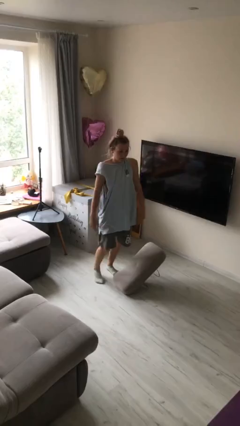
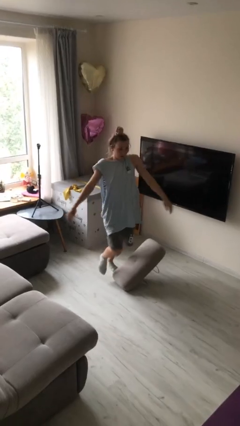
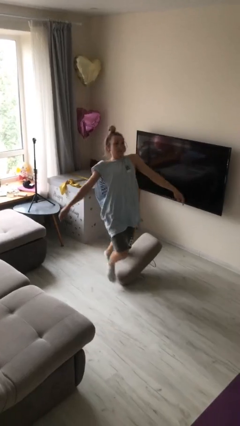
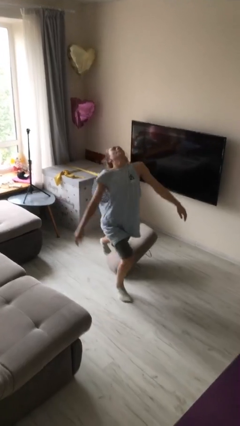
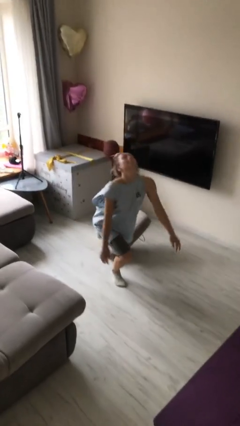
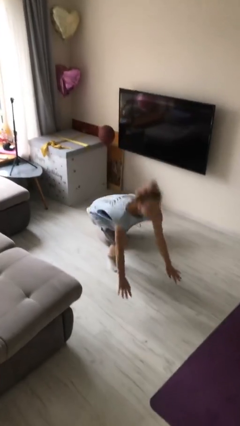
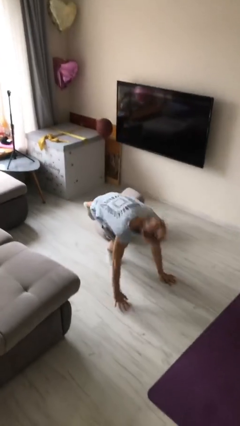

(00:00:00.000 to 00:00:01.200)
person trips on object on floor

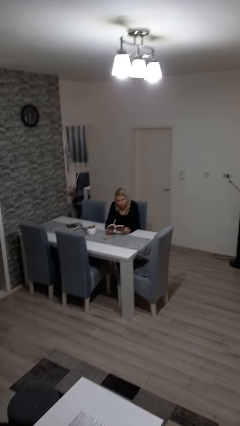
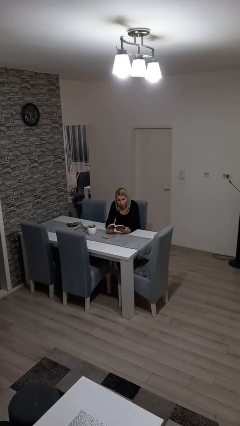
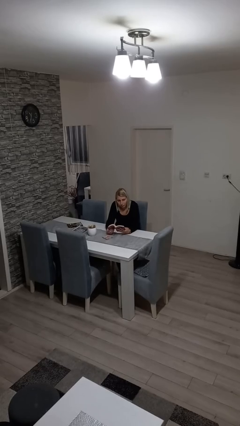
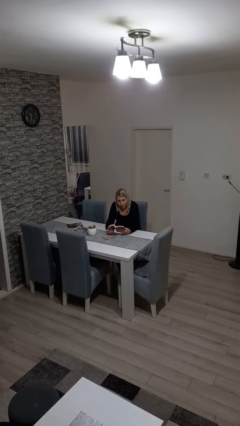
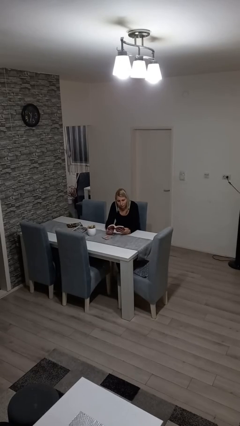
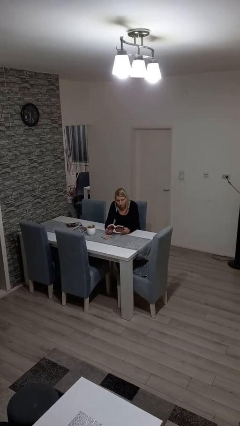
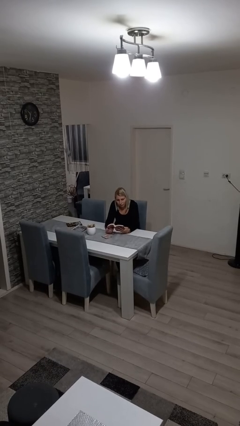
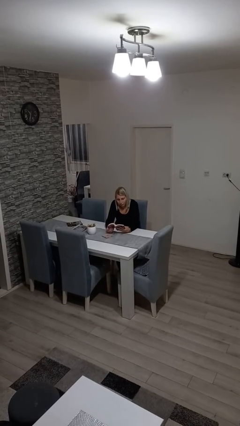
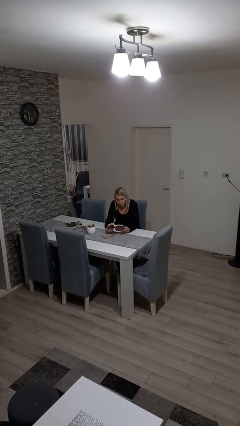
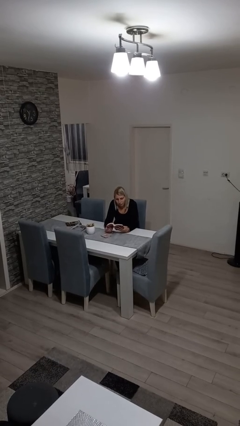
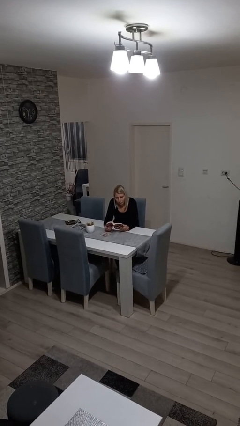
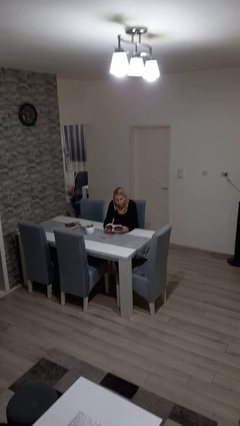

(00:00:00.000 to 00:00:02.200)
person reads book

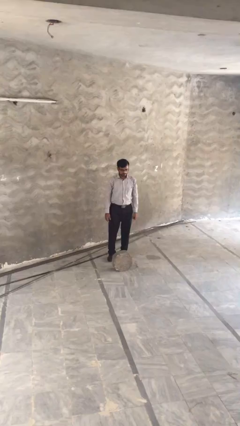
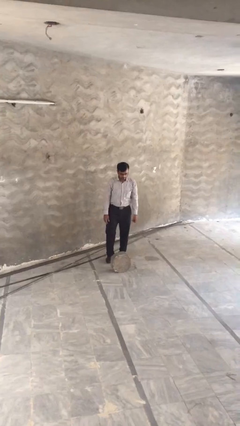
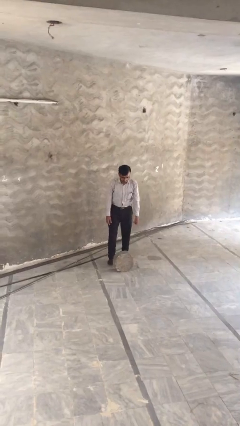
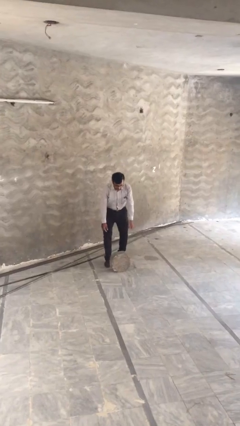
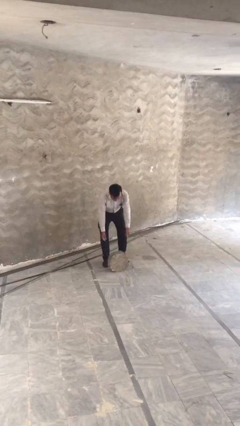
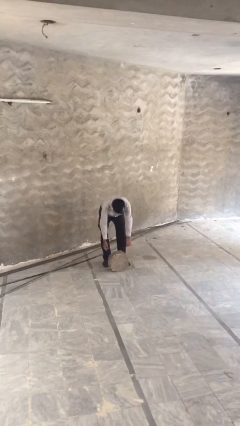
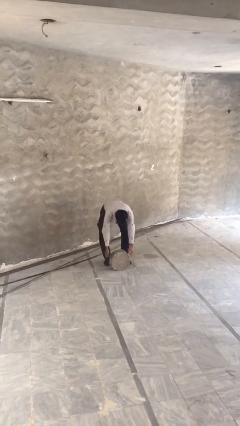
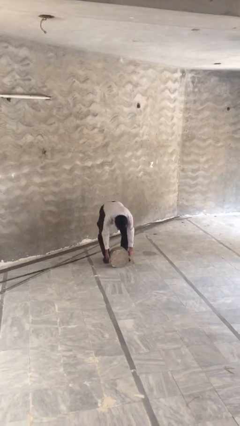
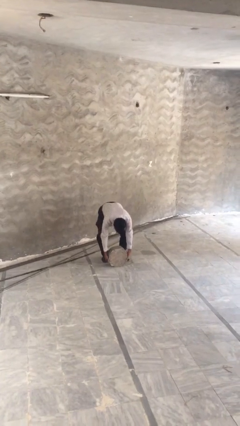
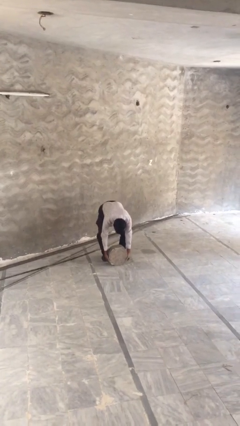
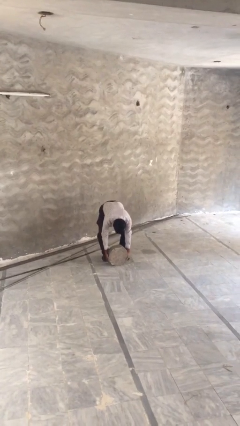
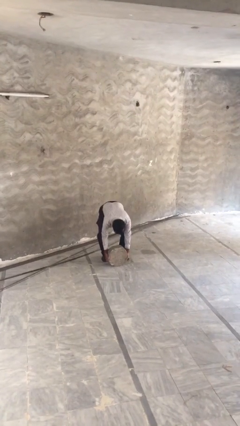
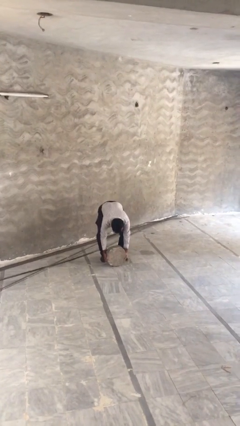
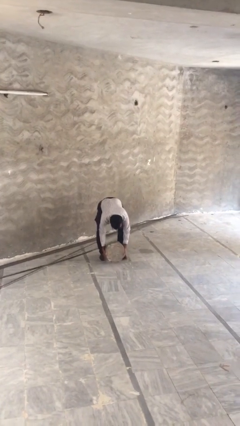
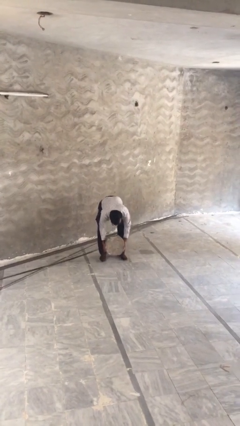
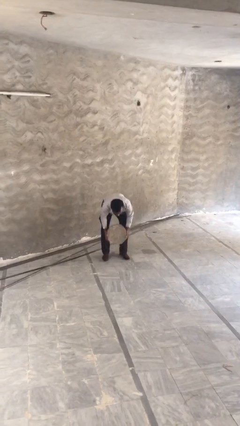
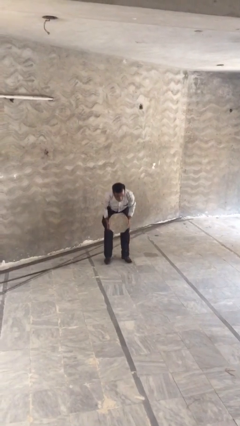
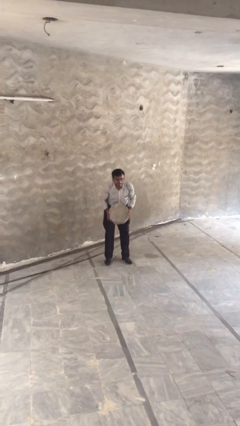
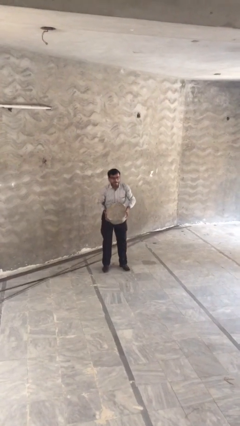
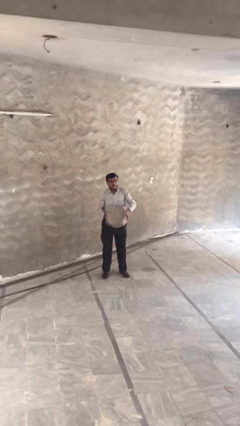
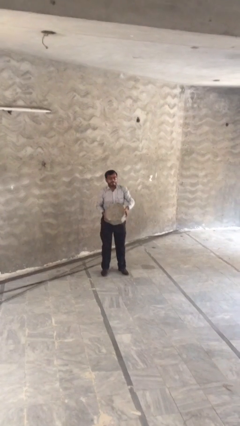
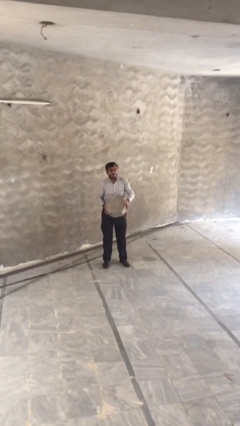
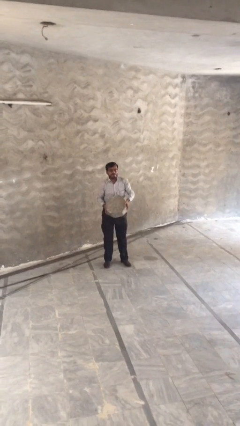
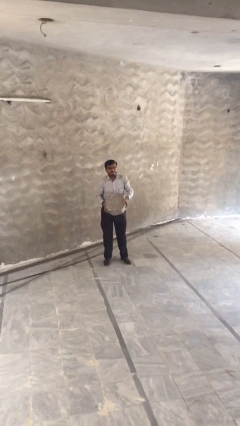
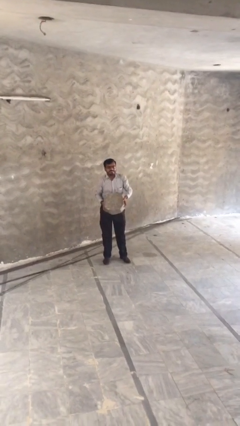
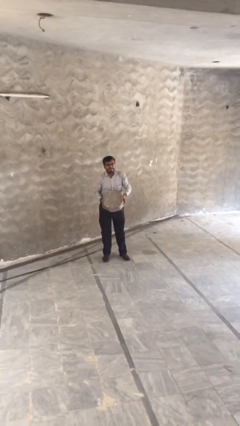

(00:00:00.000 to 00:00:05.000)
person picks up object from floor

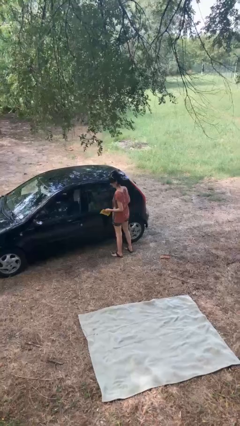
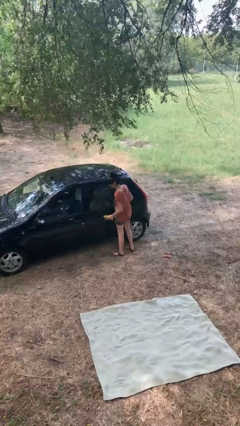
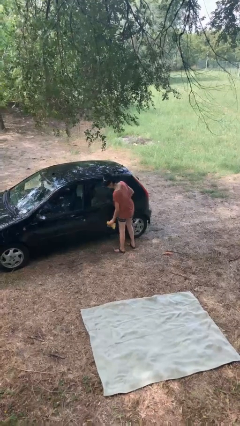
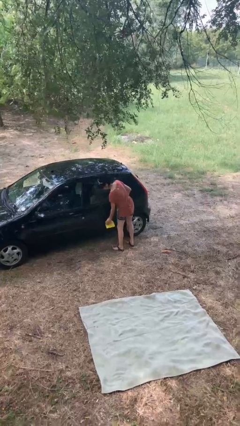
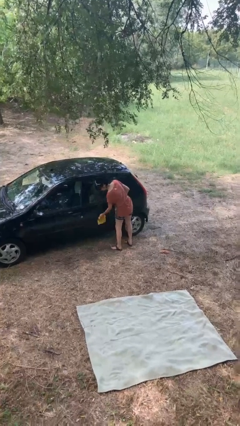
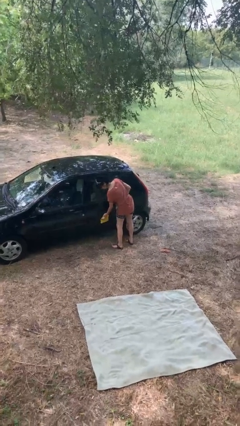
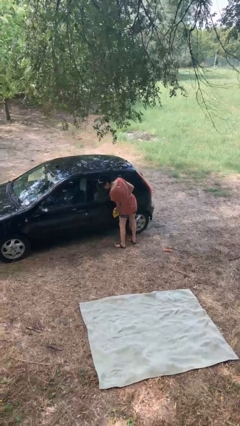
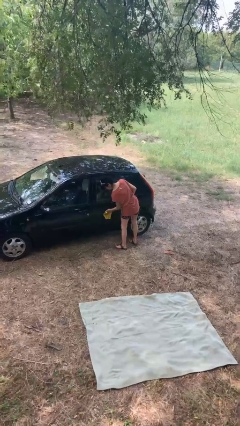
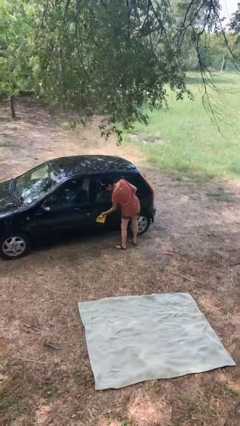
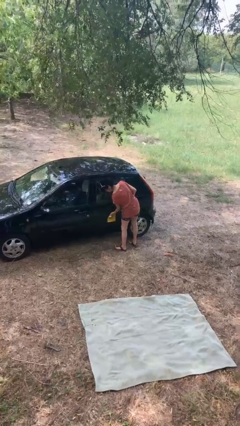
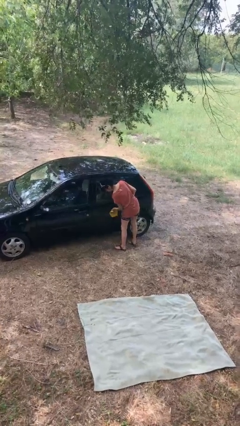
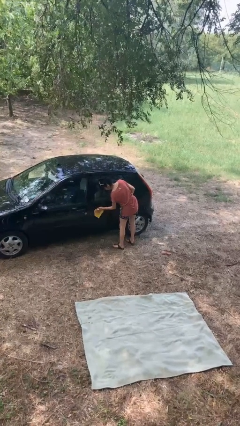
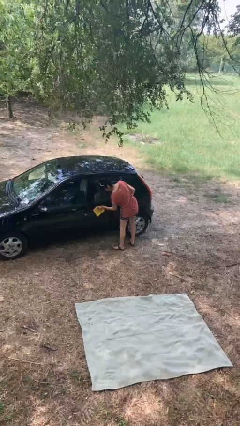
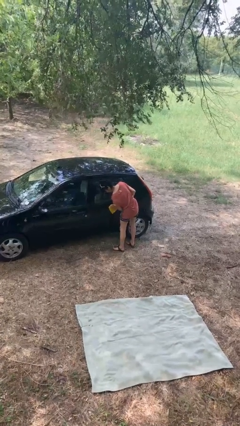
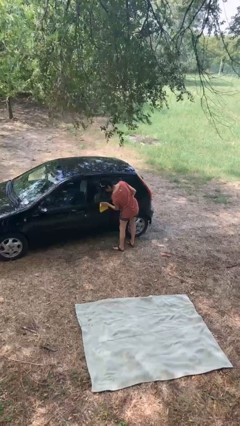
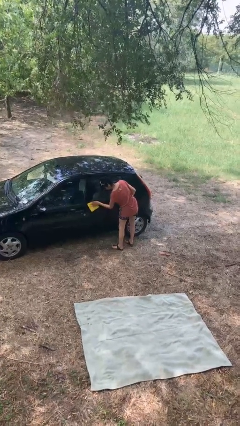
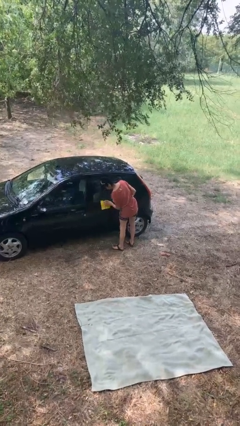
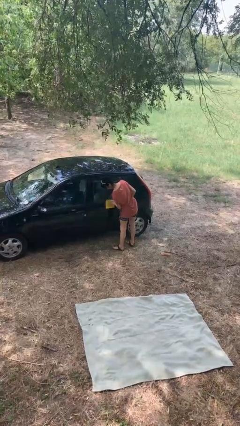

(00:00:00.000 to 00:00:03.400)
person polishes car with rag

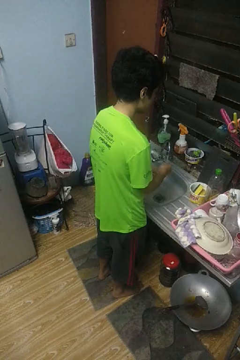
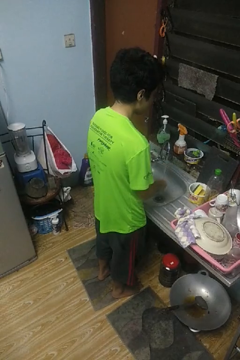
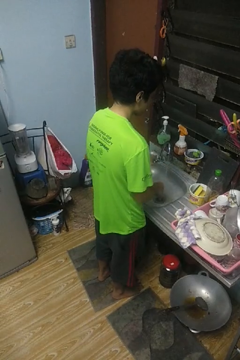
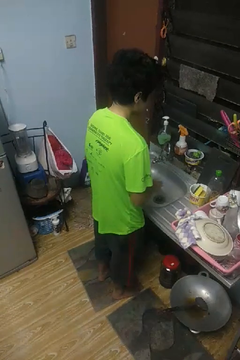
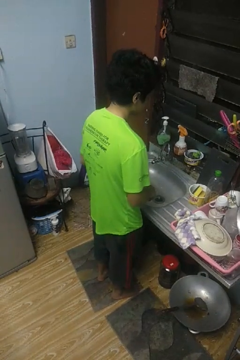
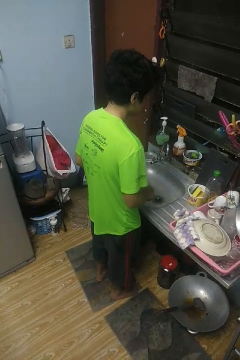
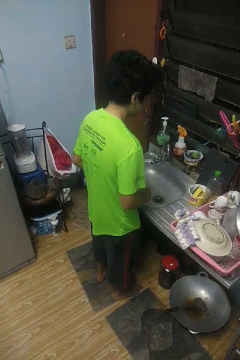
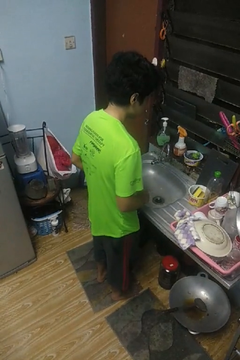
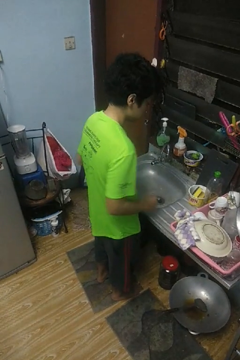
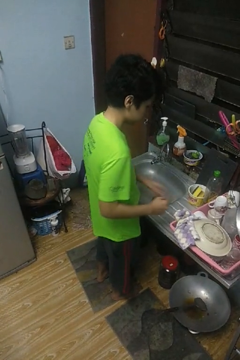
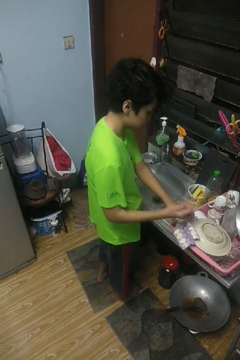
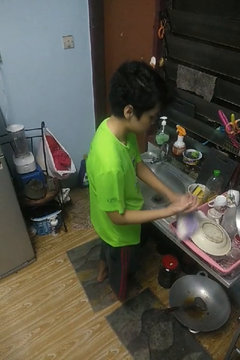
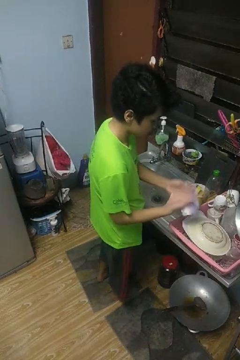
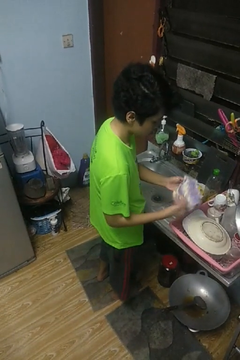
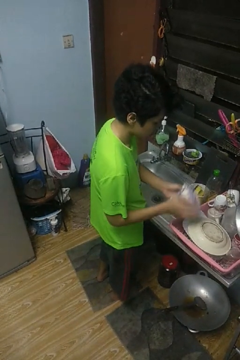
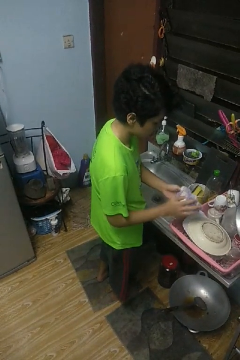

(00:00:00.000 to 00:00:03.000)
person dries hands with towel

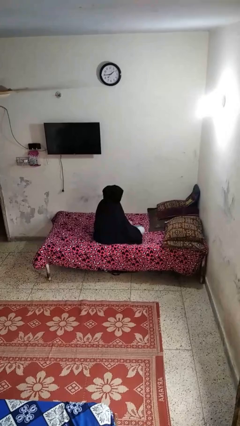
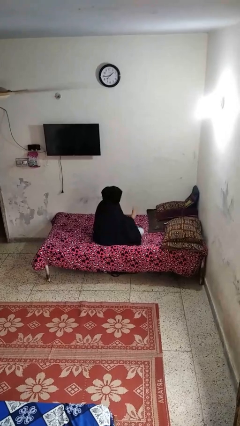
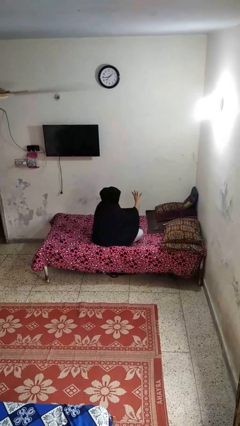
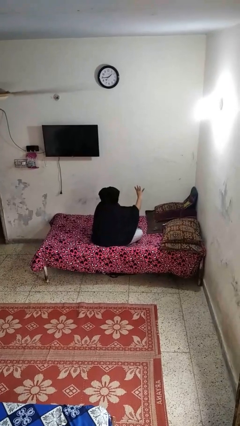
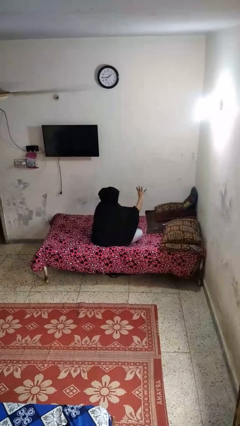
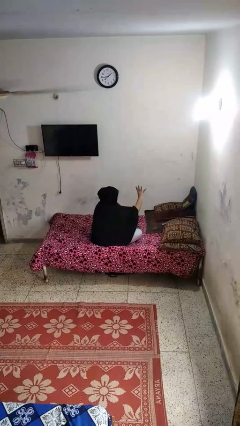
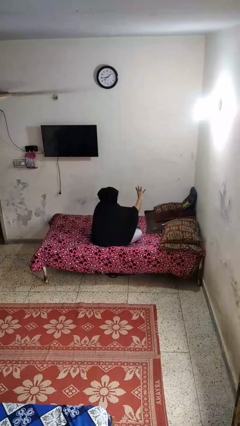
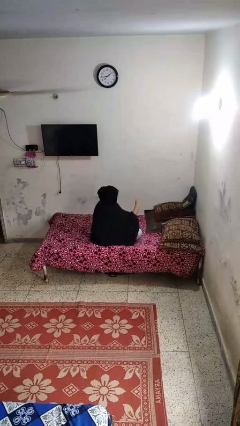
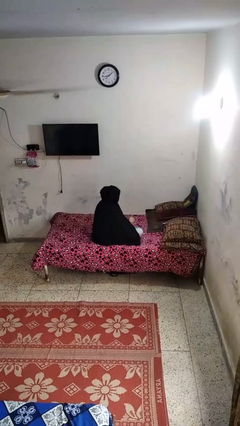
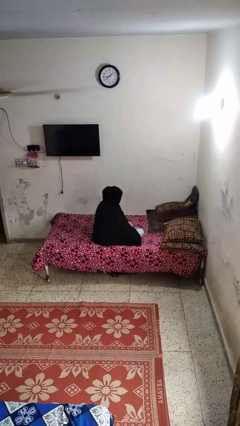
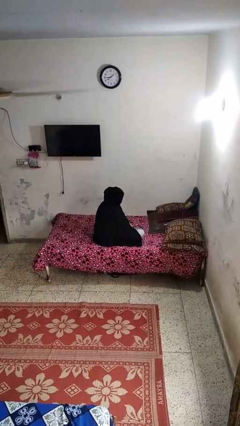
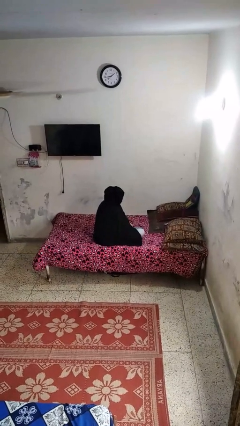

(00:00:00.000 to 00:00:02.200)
person gestures number four

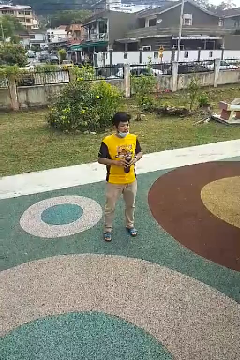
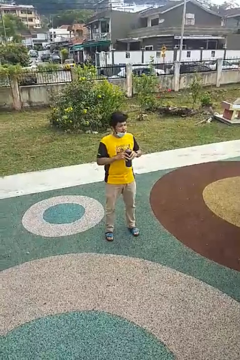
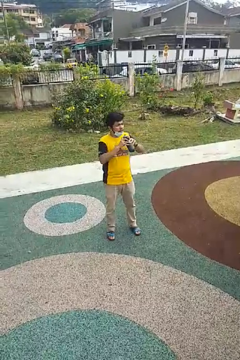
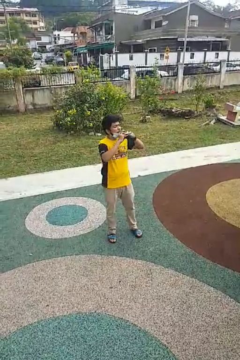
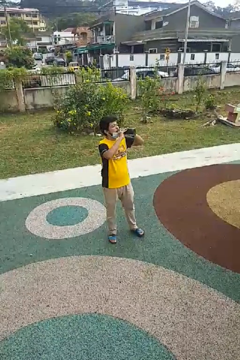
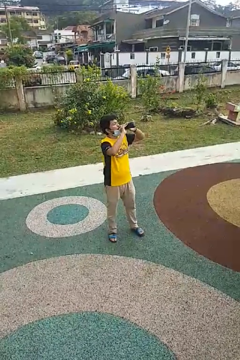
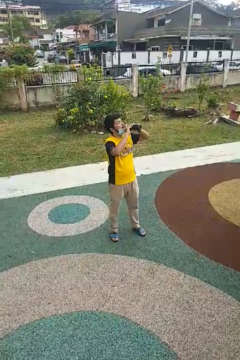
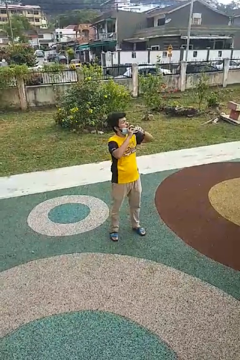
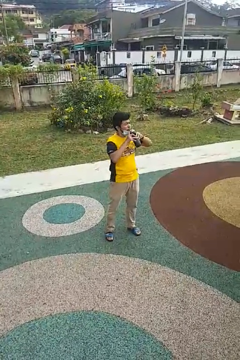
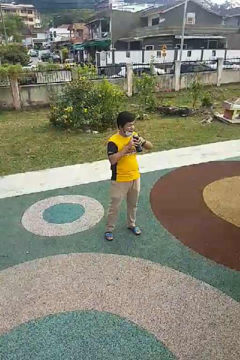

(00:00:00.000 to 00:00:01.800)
person drinks from bottle
